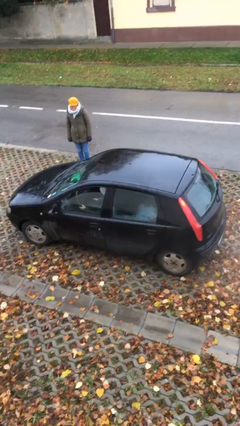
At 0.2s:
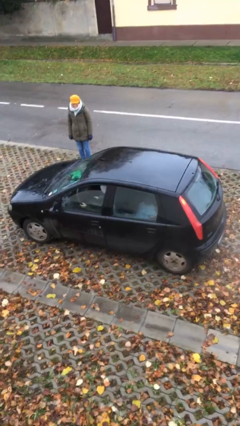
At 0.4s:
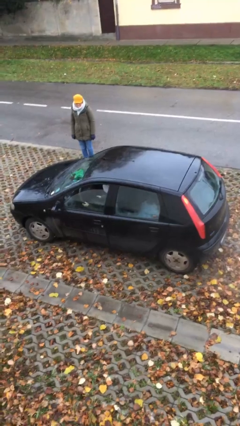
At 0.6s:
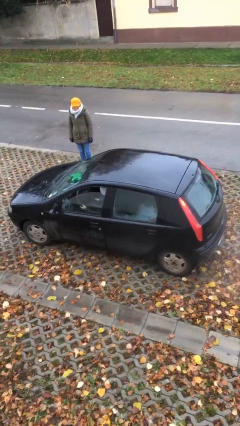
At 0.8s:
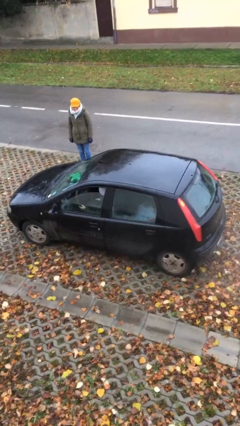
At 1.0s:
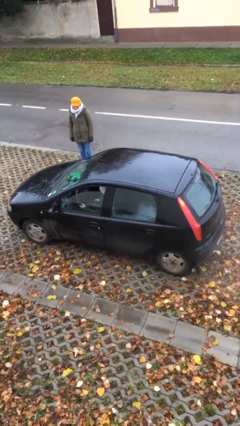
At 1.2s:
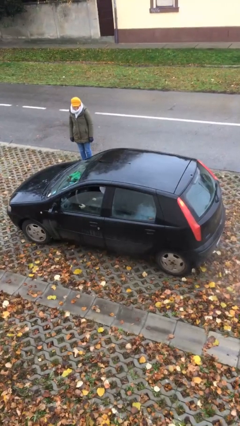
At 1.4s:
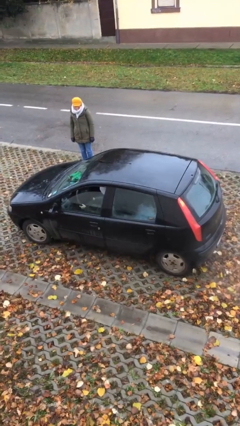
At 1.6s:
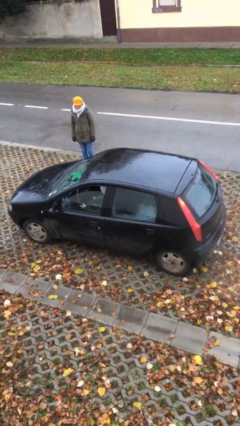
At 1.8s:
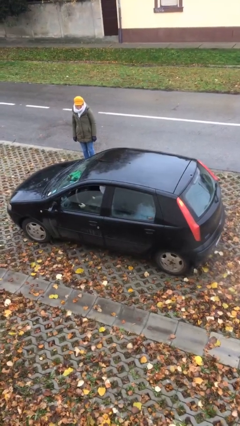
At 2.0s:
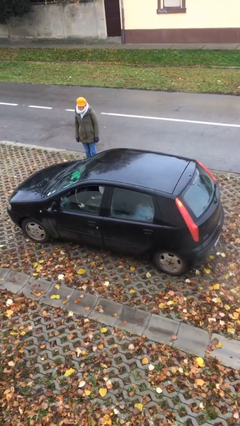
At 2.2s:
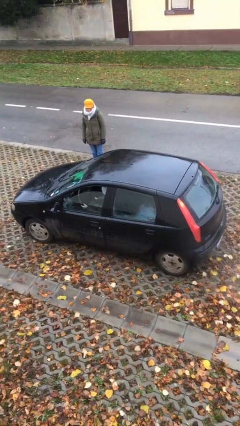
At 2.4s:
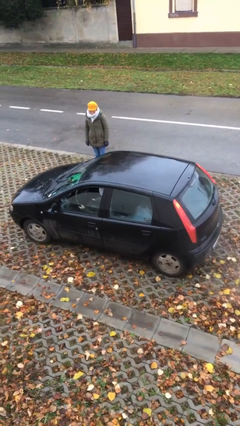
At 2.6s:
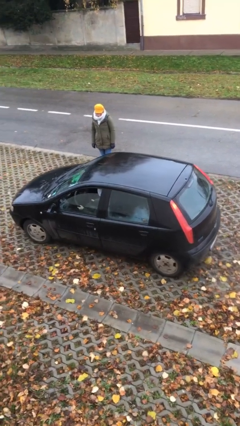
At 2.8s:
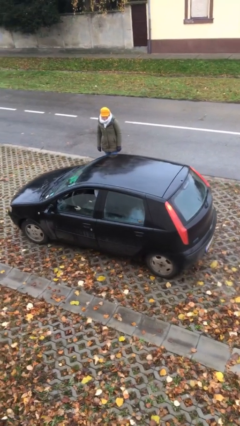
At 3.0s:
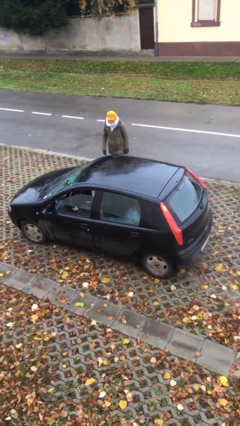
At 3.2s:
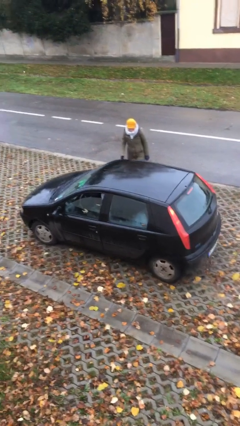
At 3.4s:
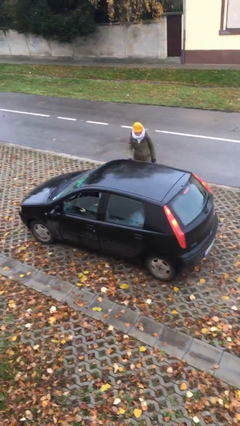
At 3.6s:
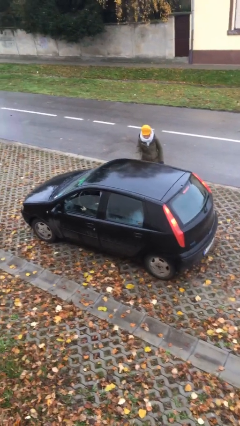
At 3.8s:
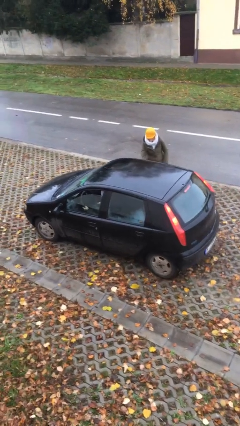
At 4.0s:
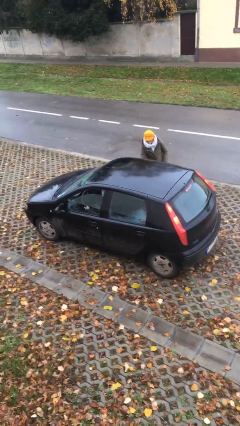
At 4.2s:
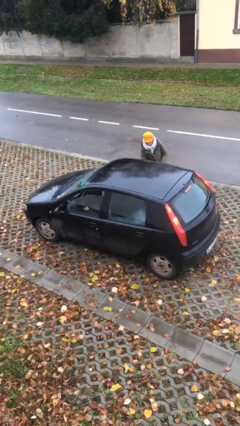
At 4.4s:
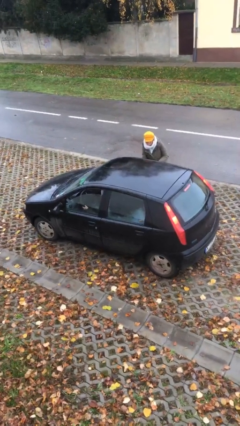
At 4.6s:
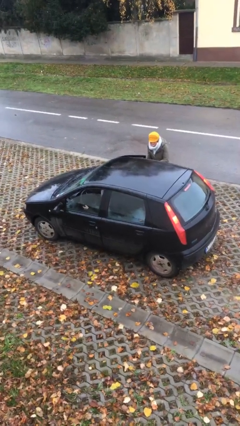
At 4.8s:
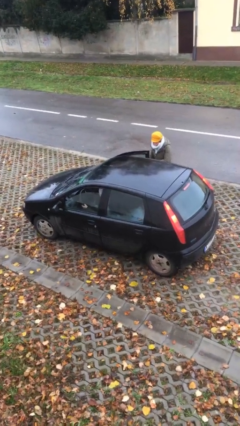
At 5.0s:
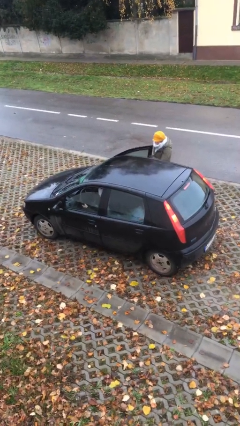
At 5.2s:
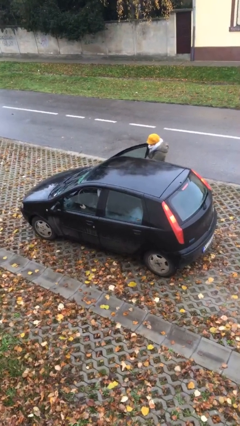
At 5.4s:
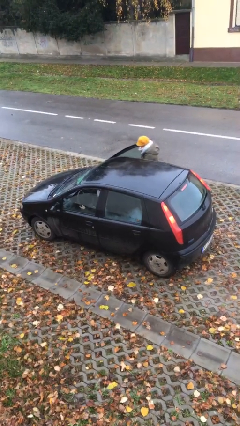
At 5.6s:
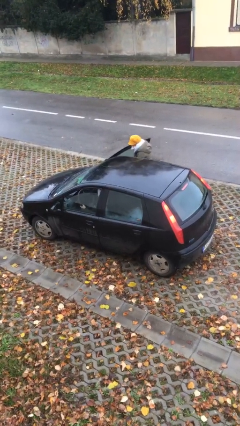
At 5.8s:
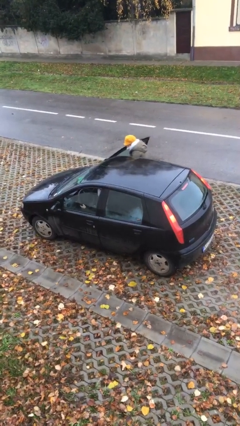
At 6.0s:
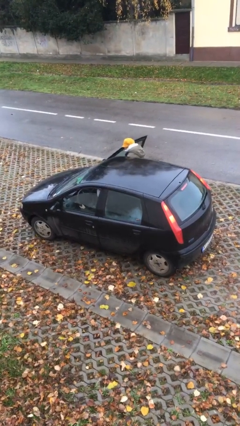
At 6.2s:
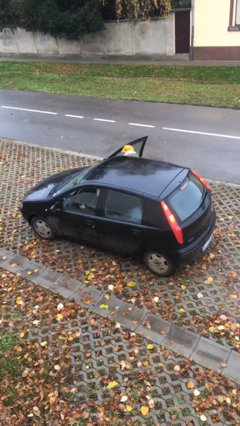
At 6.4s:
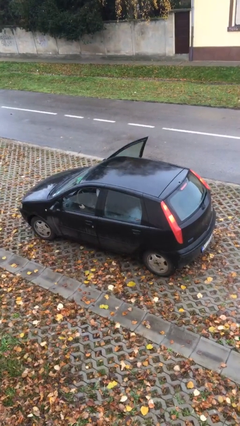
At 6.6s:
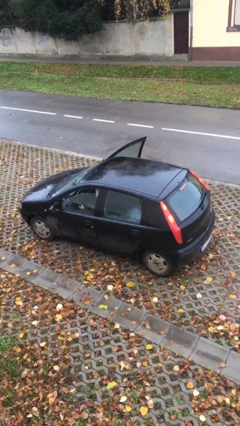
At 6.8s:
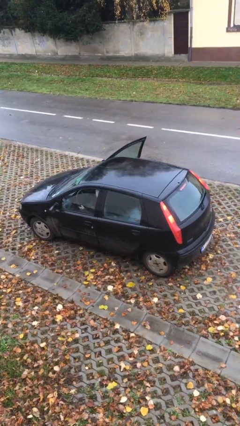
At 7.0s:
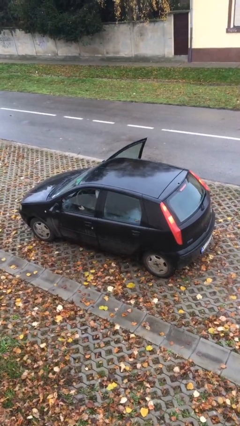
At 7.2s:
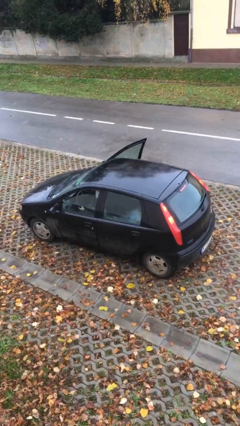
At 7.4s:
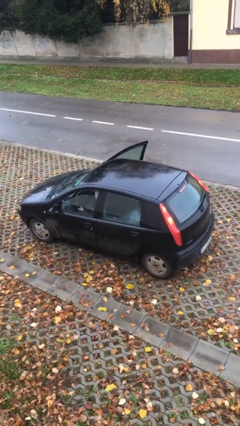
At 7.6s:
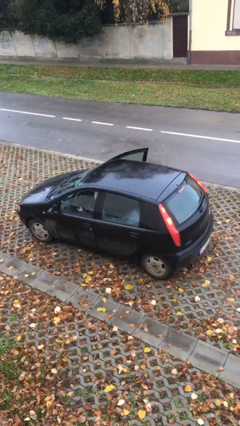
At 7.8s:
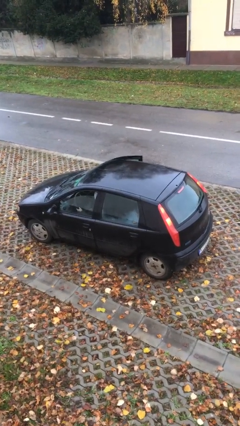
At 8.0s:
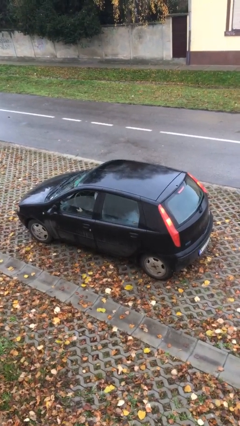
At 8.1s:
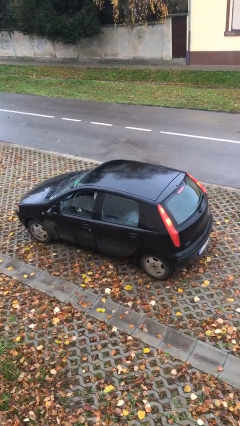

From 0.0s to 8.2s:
car picks up person

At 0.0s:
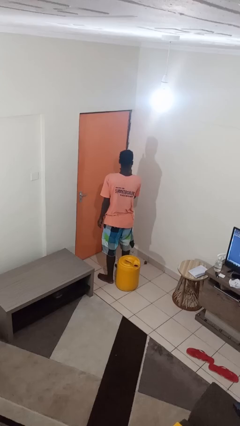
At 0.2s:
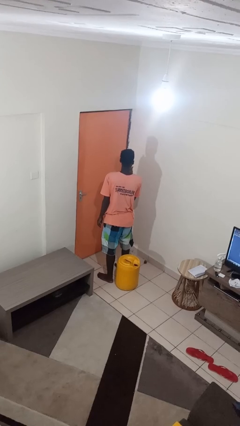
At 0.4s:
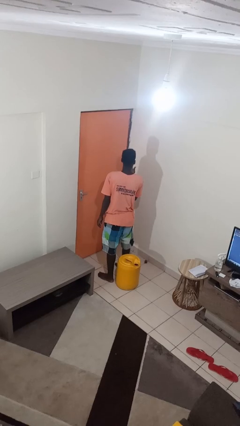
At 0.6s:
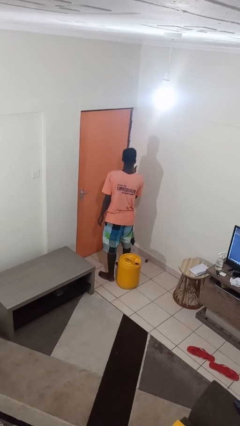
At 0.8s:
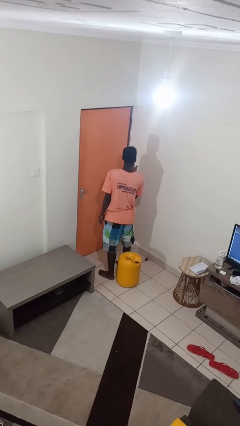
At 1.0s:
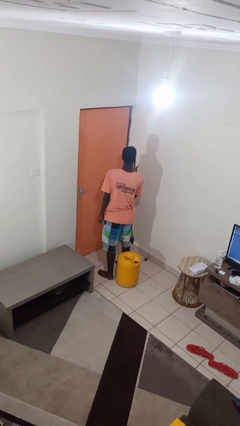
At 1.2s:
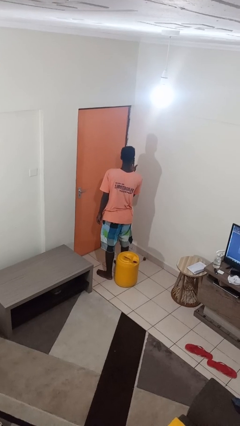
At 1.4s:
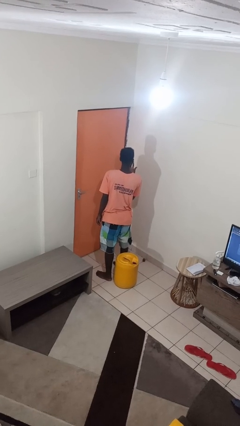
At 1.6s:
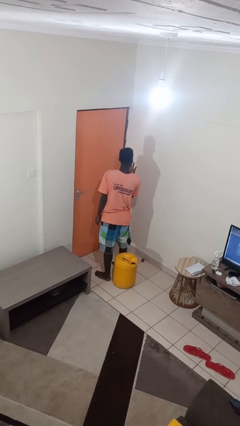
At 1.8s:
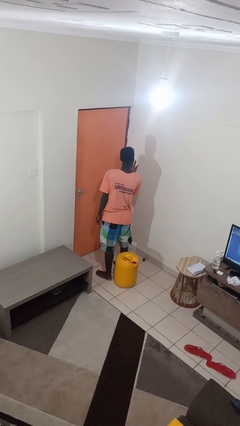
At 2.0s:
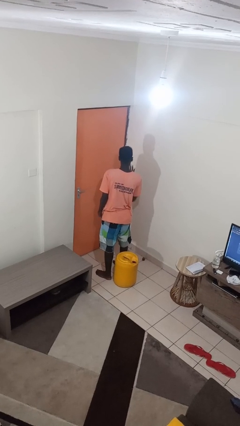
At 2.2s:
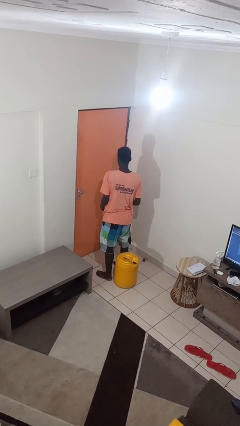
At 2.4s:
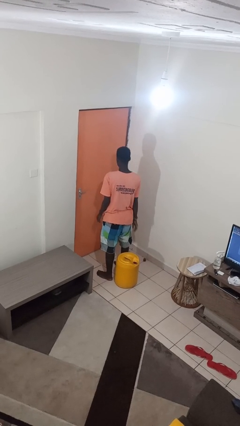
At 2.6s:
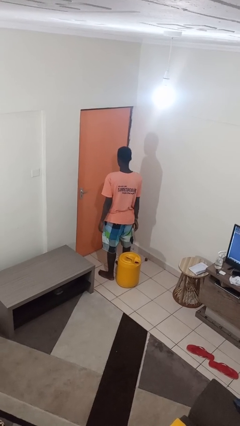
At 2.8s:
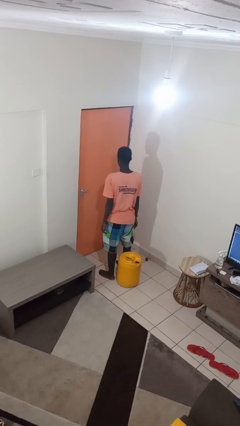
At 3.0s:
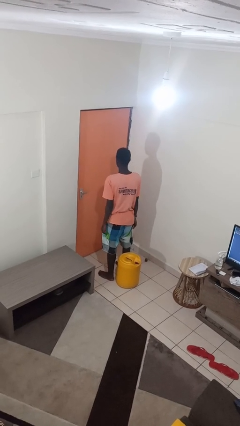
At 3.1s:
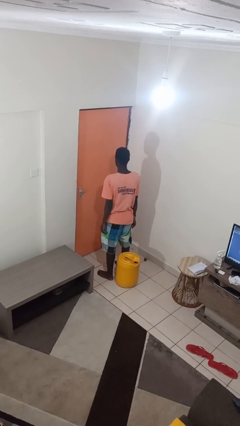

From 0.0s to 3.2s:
person licks fingers

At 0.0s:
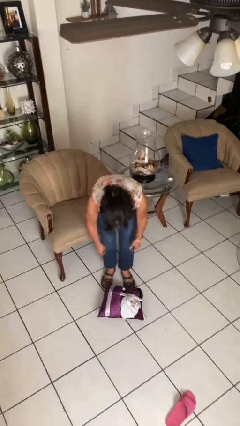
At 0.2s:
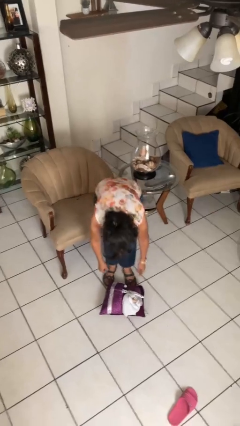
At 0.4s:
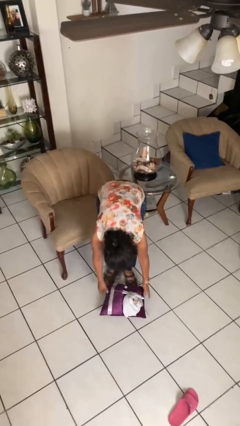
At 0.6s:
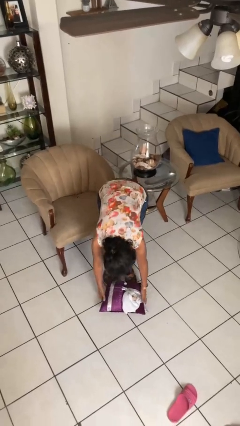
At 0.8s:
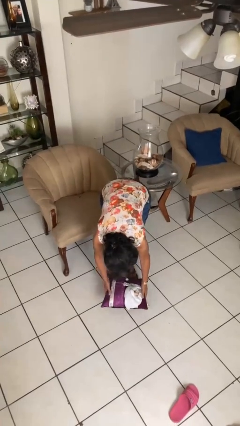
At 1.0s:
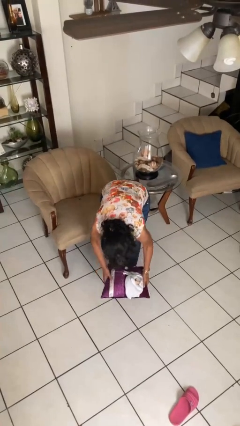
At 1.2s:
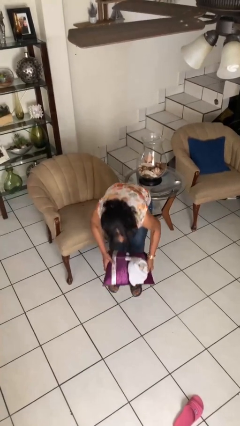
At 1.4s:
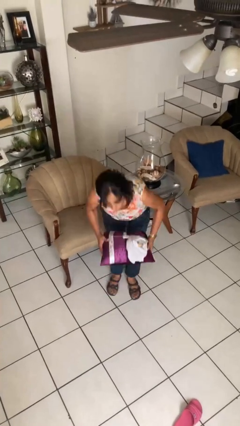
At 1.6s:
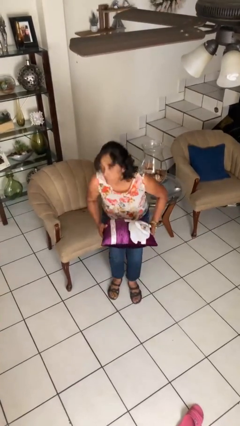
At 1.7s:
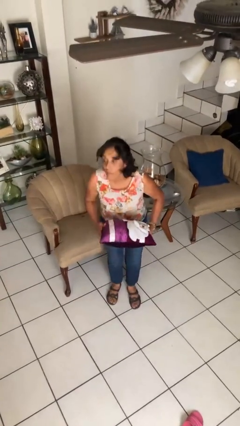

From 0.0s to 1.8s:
person picks up object from floor

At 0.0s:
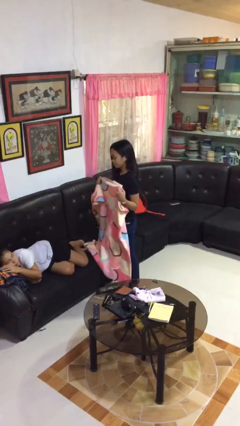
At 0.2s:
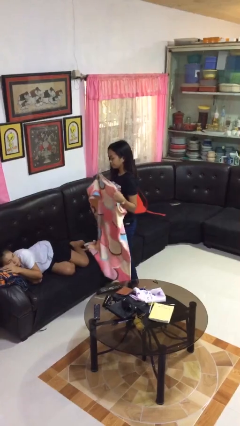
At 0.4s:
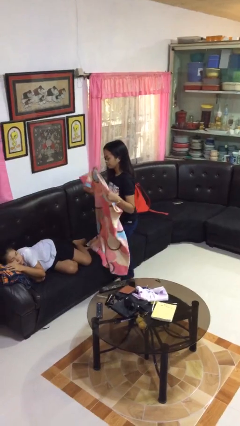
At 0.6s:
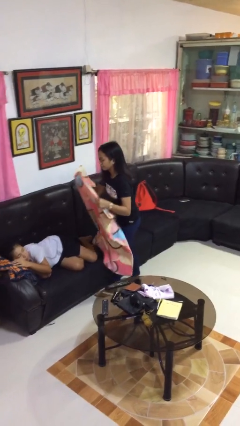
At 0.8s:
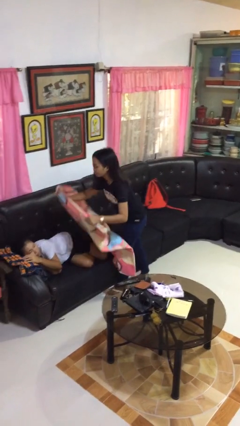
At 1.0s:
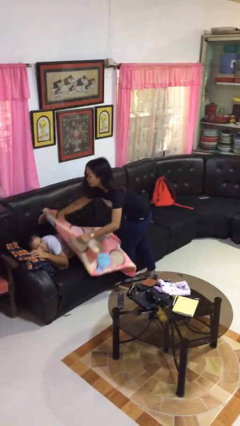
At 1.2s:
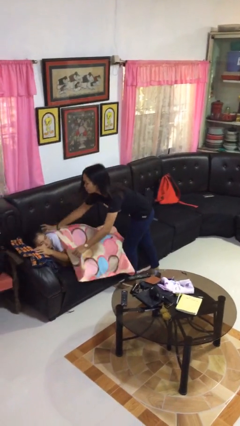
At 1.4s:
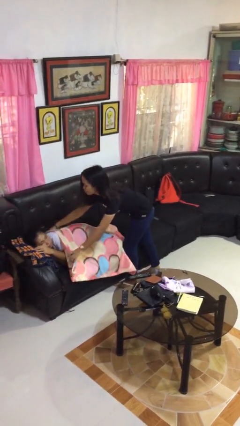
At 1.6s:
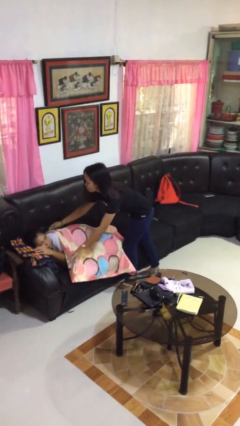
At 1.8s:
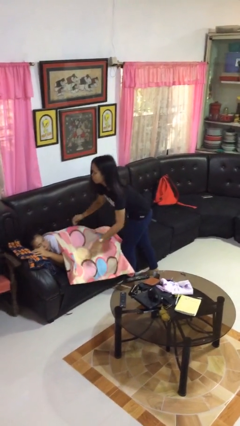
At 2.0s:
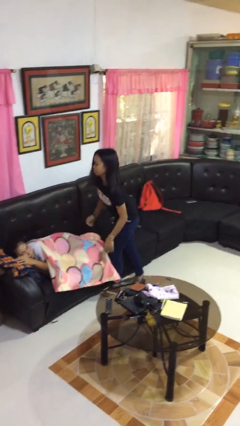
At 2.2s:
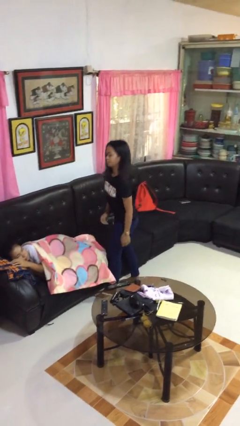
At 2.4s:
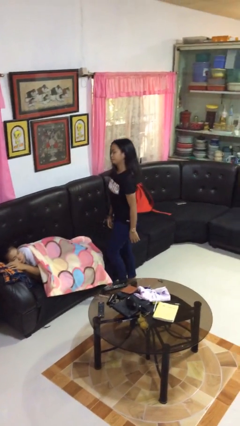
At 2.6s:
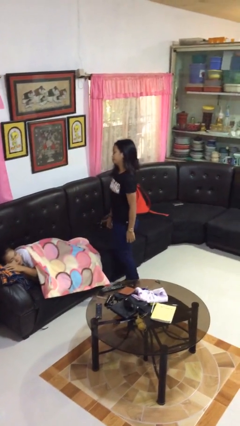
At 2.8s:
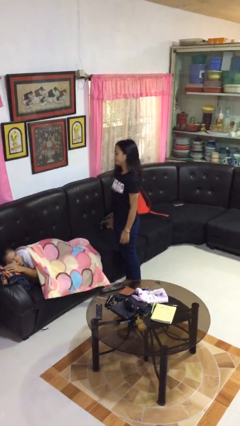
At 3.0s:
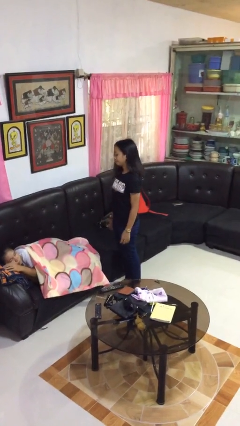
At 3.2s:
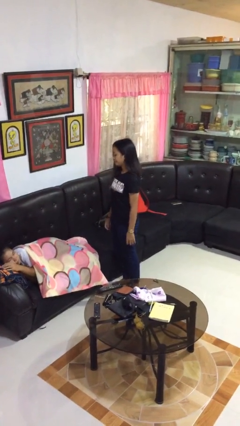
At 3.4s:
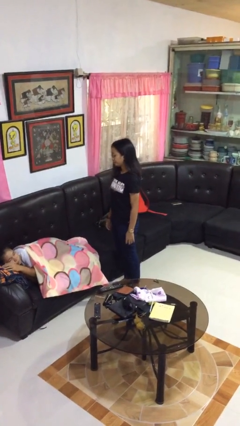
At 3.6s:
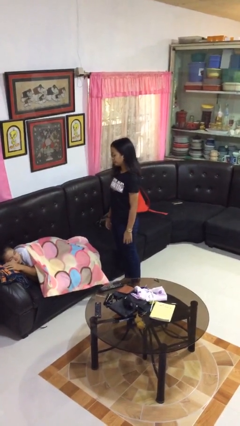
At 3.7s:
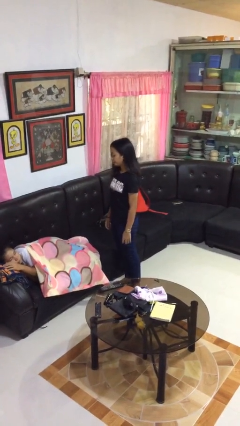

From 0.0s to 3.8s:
person covers friend with blanket

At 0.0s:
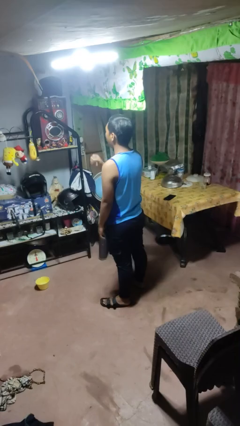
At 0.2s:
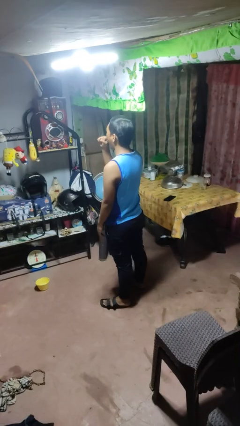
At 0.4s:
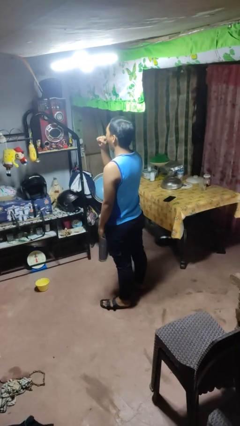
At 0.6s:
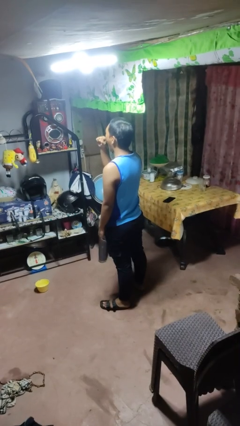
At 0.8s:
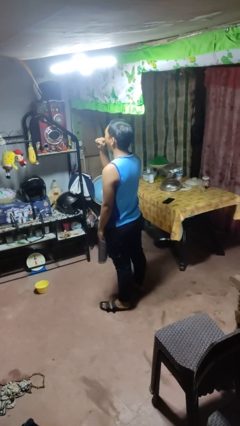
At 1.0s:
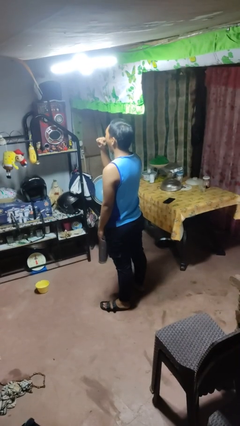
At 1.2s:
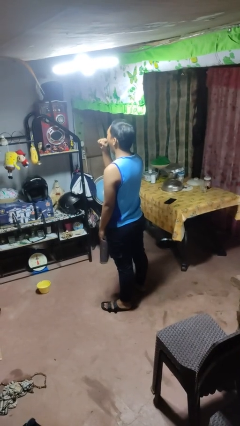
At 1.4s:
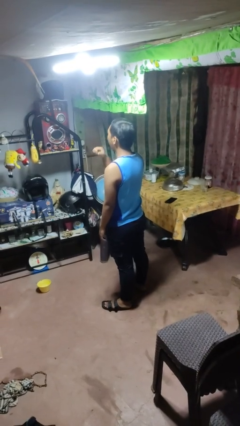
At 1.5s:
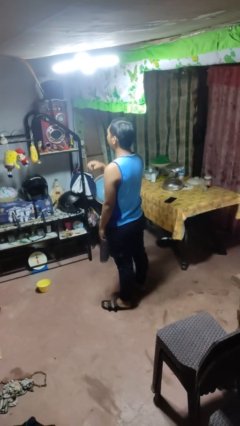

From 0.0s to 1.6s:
person yawns
